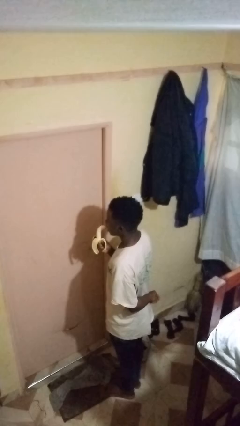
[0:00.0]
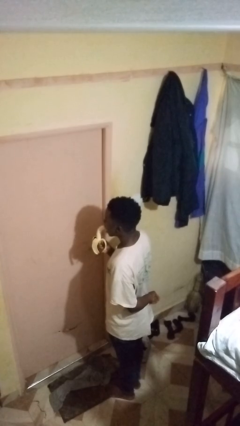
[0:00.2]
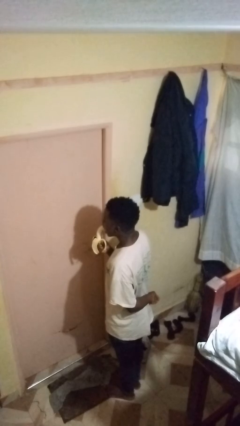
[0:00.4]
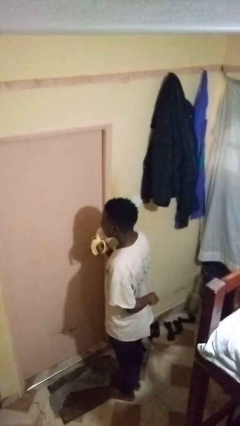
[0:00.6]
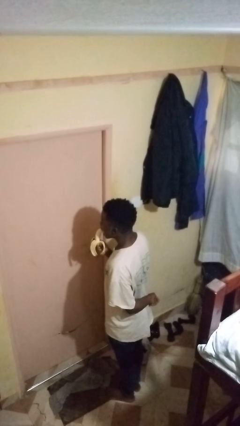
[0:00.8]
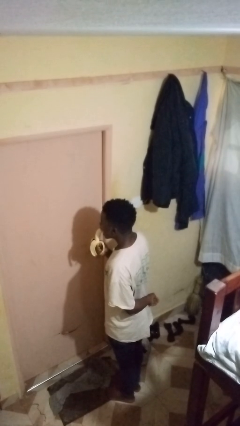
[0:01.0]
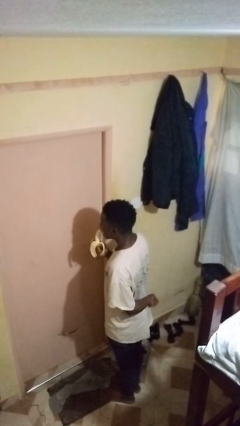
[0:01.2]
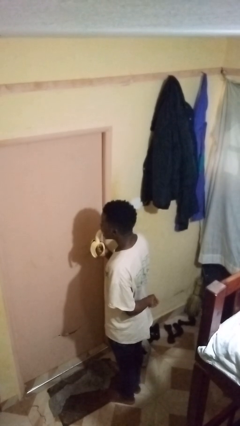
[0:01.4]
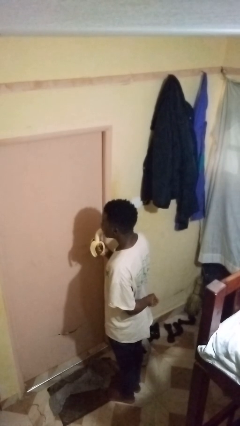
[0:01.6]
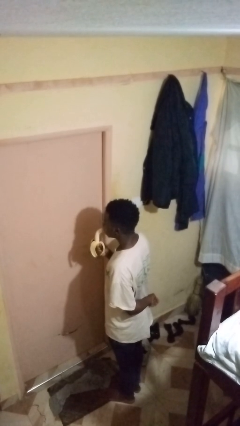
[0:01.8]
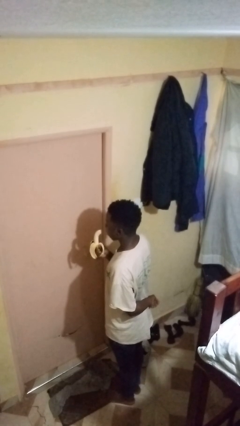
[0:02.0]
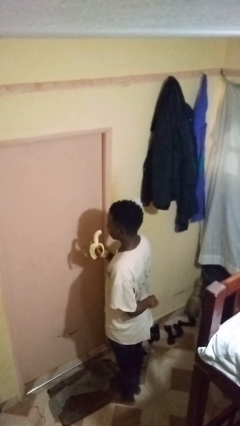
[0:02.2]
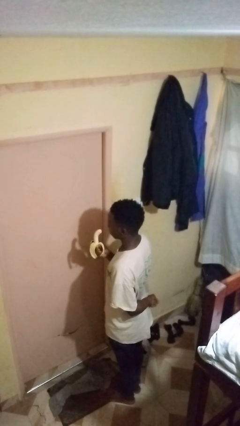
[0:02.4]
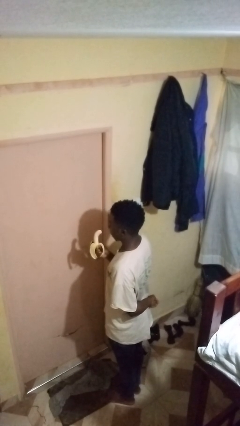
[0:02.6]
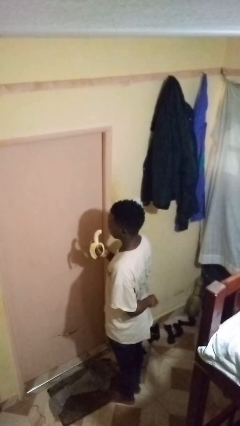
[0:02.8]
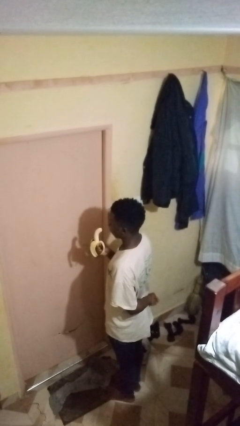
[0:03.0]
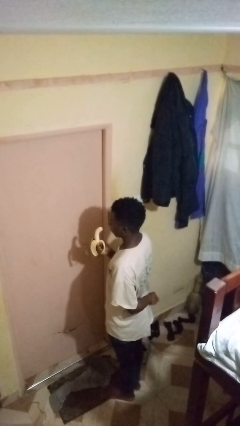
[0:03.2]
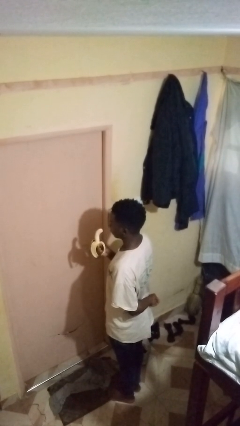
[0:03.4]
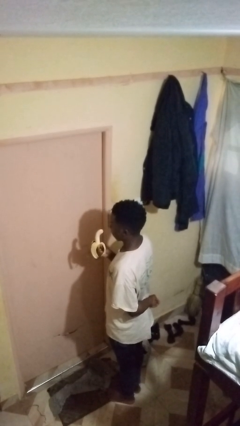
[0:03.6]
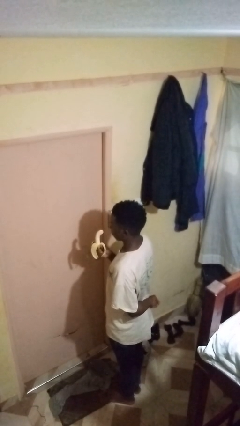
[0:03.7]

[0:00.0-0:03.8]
person eats banana

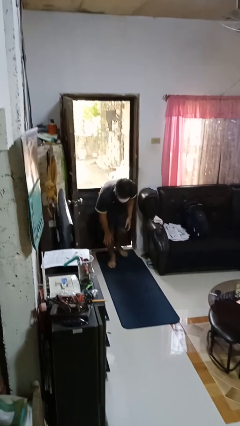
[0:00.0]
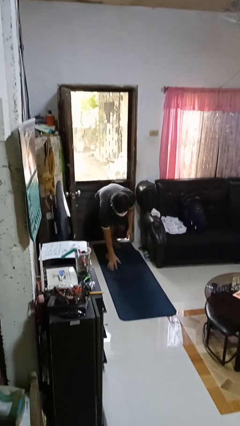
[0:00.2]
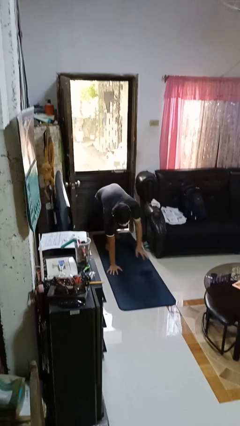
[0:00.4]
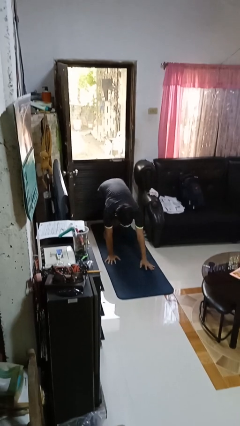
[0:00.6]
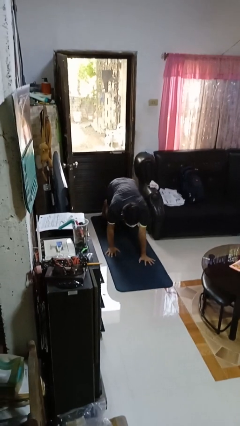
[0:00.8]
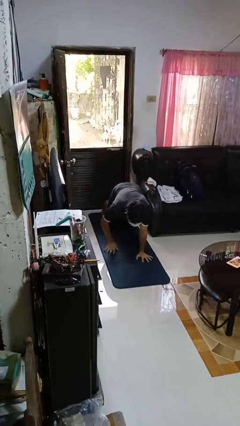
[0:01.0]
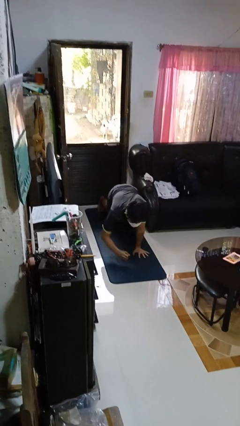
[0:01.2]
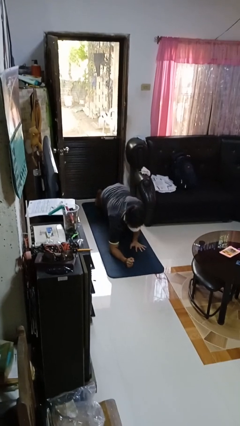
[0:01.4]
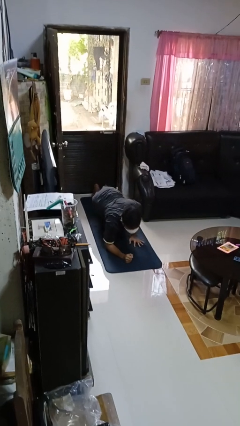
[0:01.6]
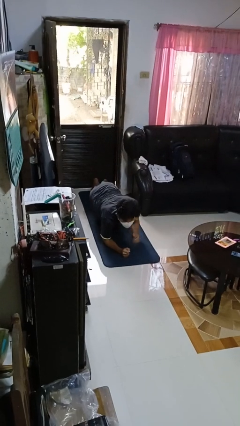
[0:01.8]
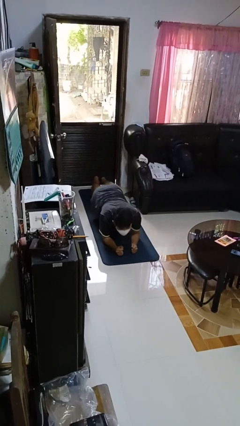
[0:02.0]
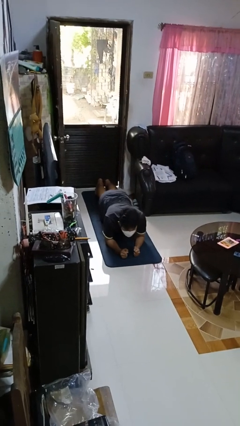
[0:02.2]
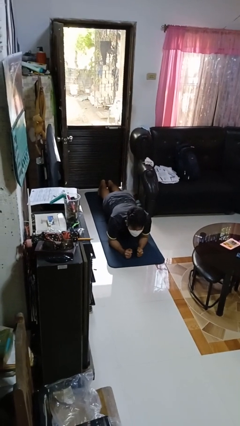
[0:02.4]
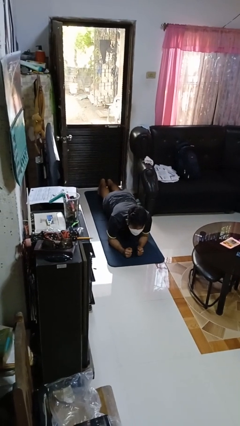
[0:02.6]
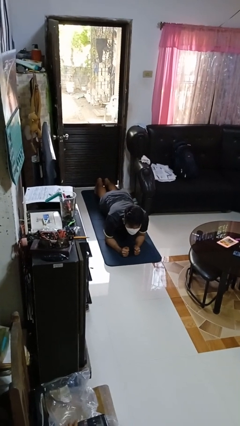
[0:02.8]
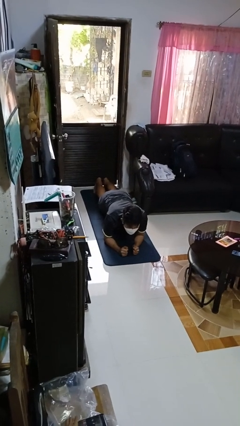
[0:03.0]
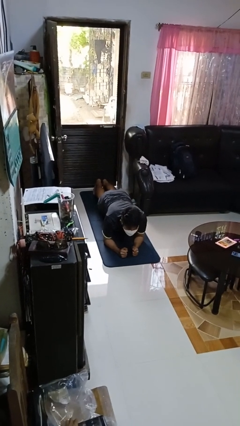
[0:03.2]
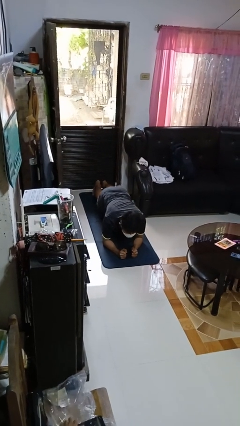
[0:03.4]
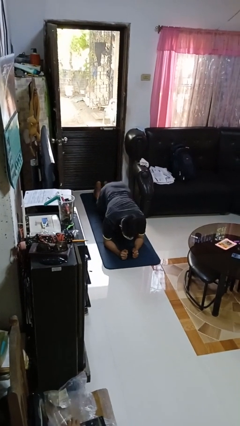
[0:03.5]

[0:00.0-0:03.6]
person exercises with plank

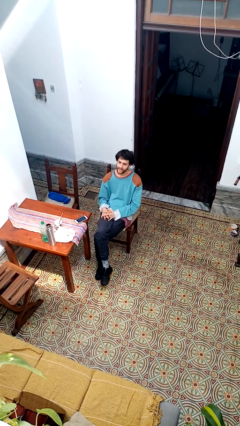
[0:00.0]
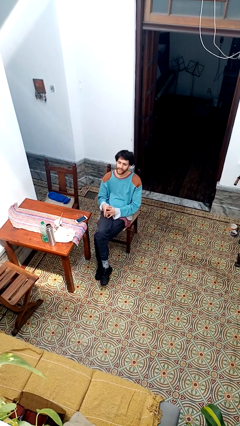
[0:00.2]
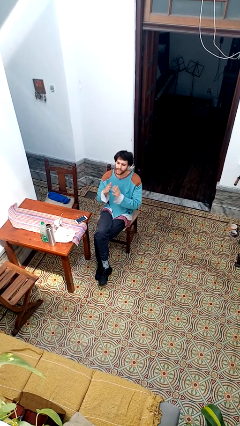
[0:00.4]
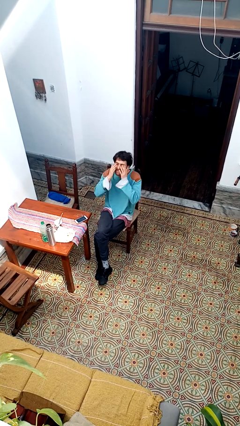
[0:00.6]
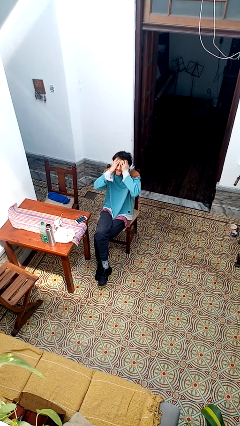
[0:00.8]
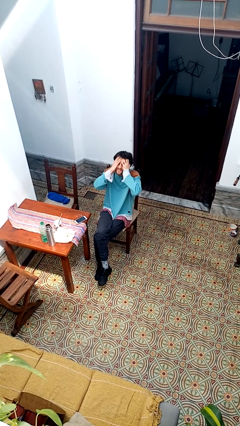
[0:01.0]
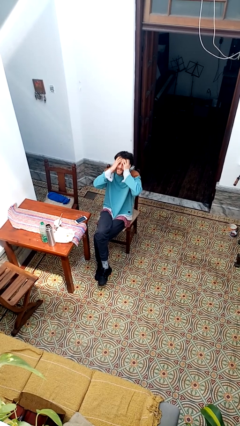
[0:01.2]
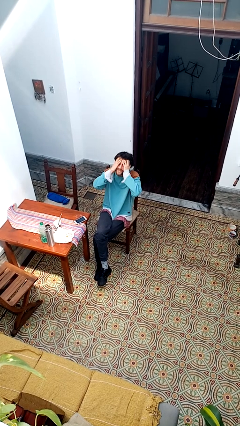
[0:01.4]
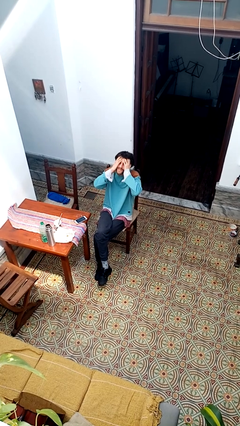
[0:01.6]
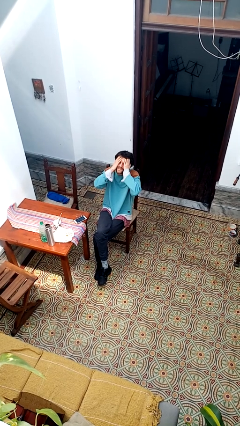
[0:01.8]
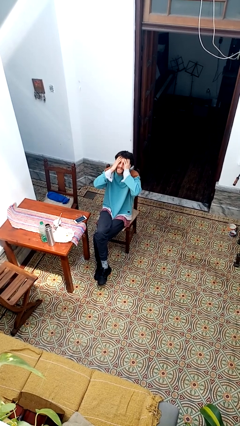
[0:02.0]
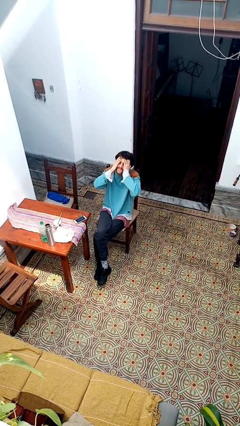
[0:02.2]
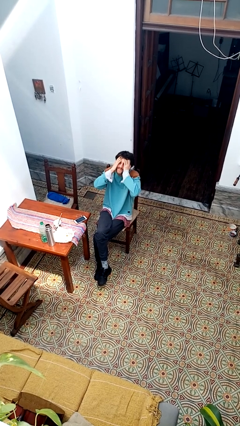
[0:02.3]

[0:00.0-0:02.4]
person covers face with hands

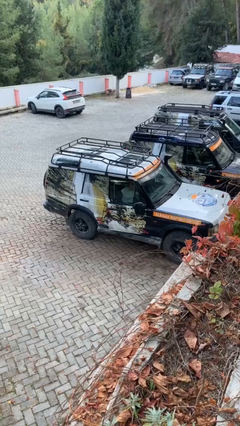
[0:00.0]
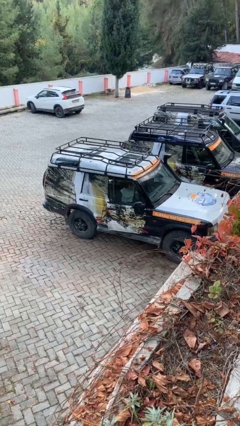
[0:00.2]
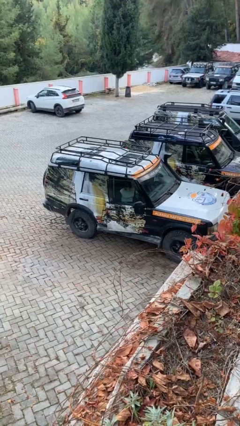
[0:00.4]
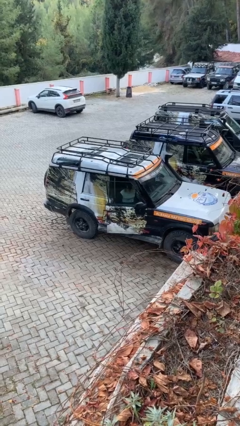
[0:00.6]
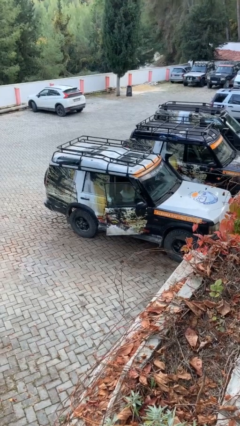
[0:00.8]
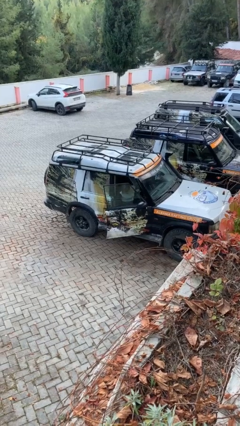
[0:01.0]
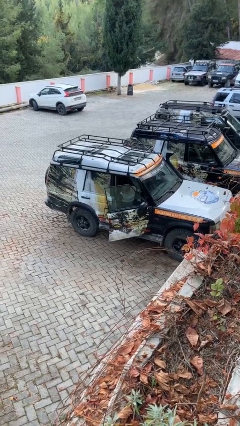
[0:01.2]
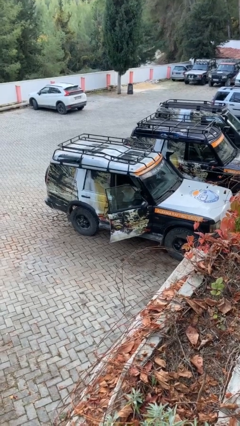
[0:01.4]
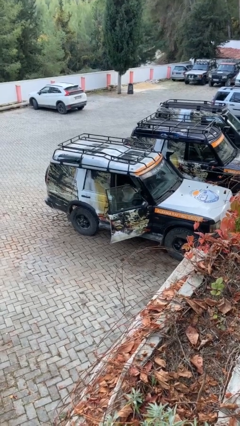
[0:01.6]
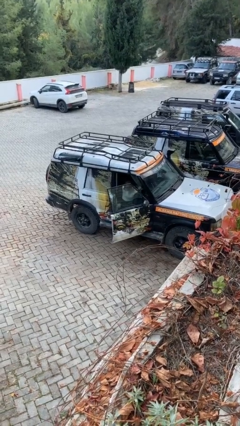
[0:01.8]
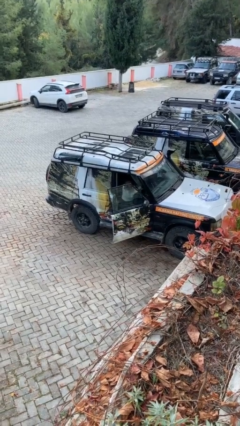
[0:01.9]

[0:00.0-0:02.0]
person opens car door

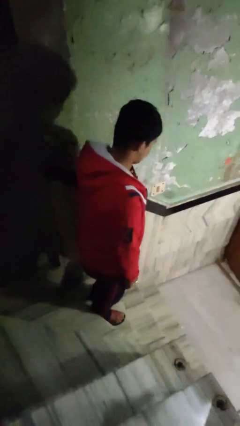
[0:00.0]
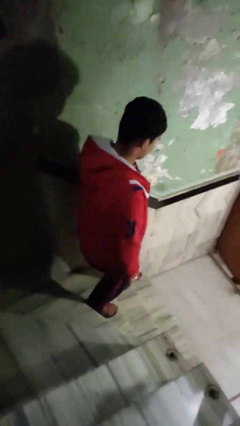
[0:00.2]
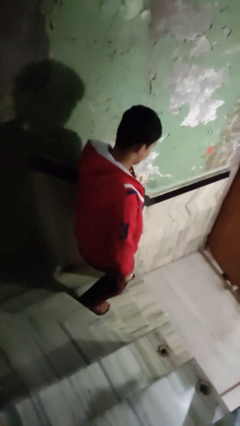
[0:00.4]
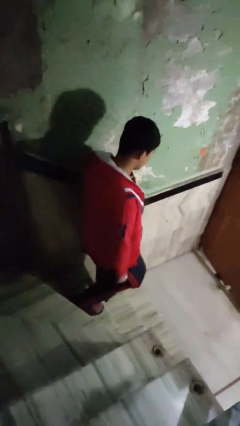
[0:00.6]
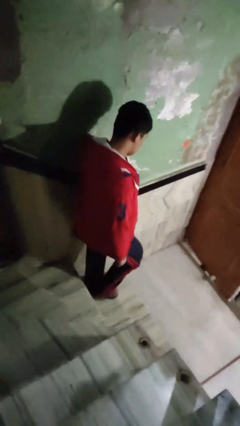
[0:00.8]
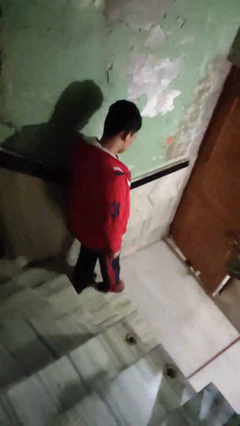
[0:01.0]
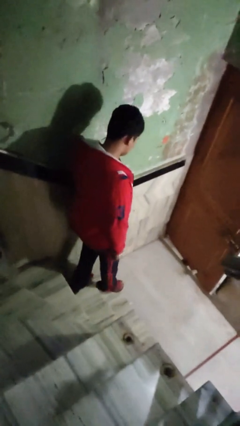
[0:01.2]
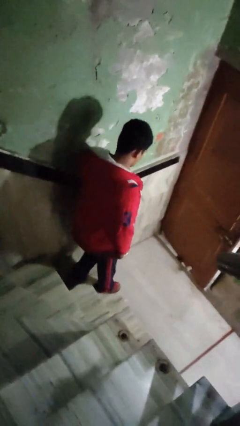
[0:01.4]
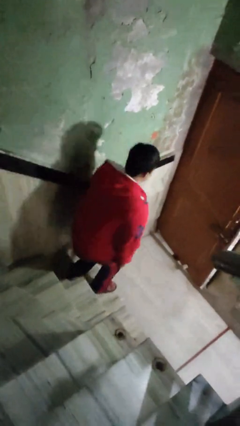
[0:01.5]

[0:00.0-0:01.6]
person climbs down stairs

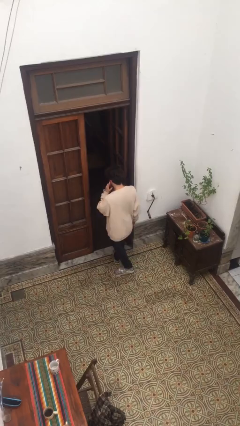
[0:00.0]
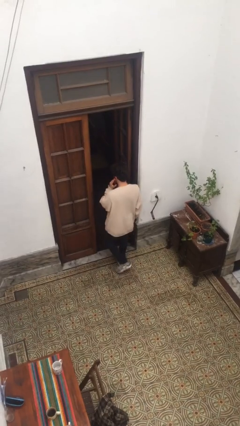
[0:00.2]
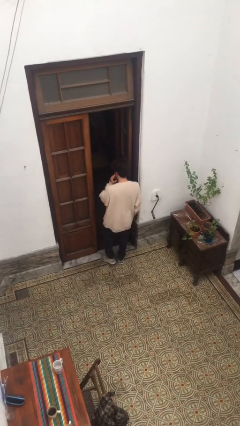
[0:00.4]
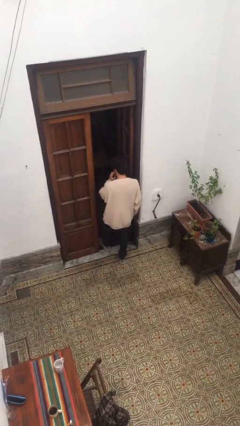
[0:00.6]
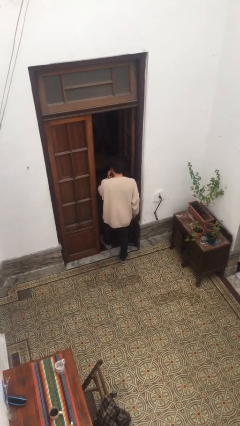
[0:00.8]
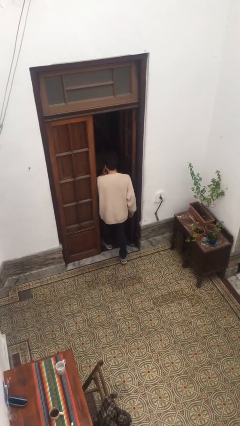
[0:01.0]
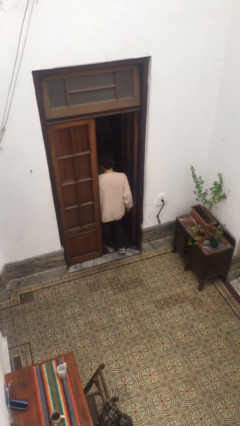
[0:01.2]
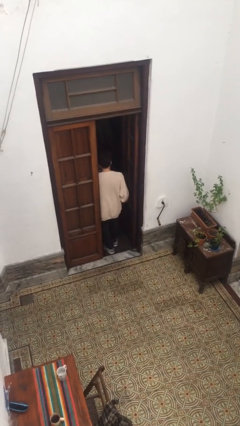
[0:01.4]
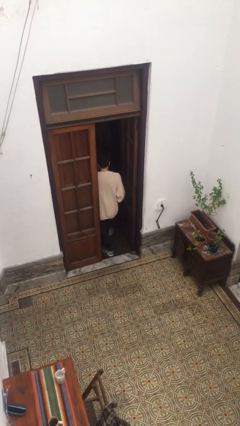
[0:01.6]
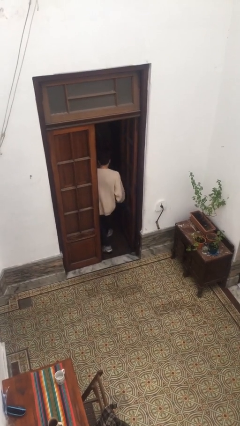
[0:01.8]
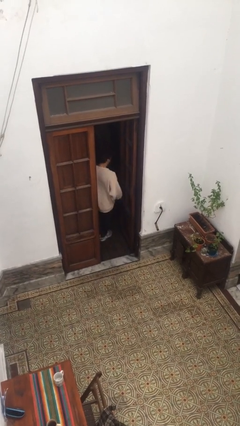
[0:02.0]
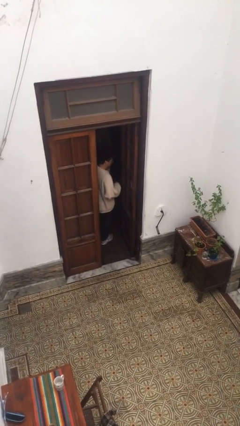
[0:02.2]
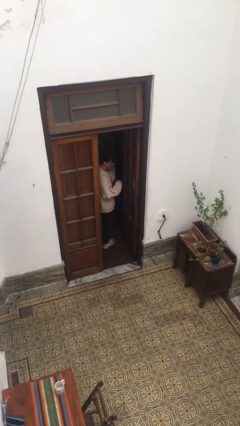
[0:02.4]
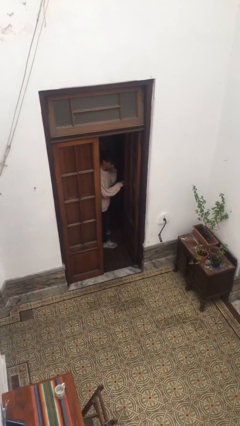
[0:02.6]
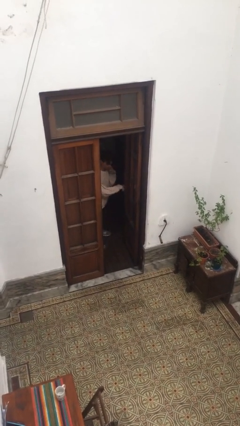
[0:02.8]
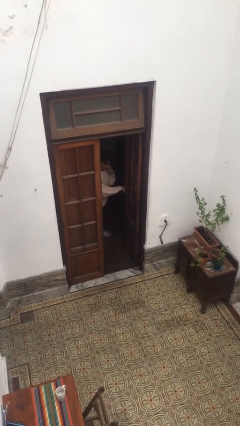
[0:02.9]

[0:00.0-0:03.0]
person exits scene through structure

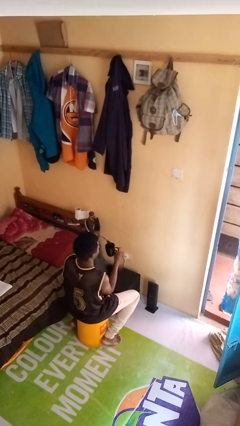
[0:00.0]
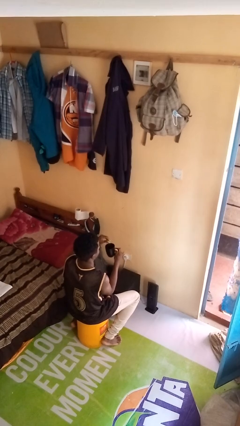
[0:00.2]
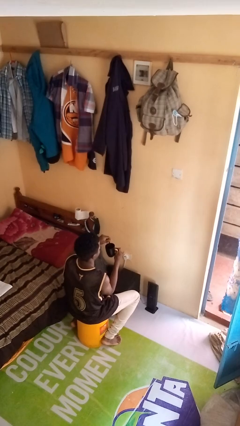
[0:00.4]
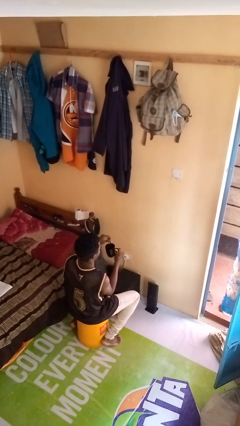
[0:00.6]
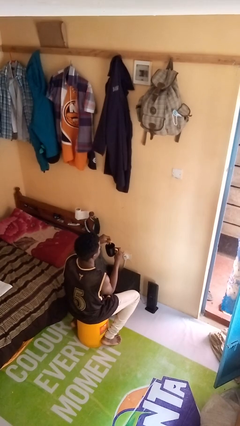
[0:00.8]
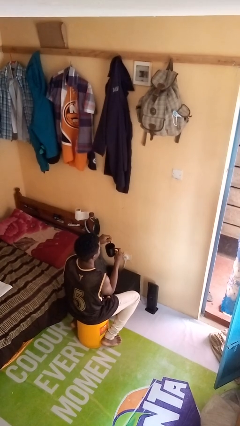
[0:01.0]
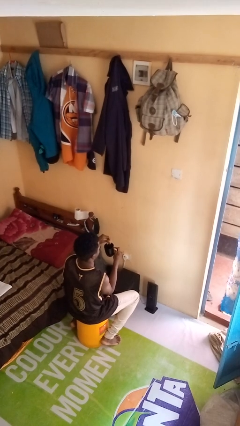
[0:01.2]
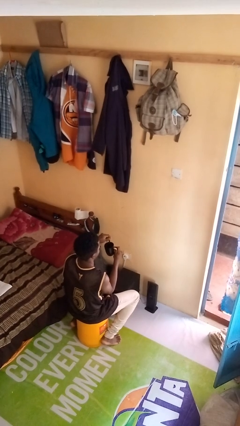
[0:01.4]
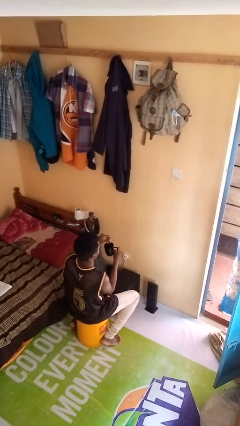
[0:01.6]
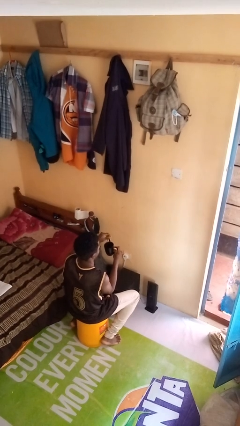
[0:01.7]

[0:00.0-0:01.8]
person stirs mug
